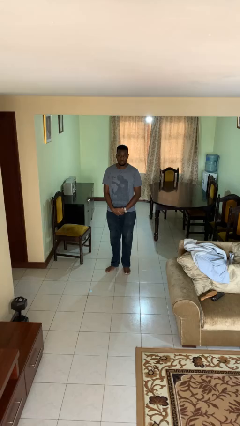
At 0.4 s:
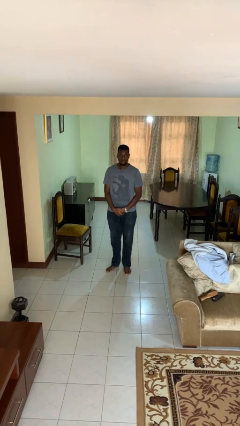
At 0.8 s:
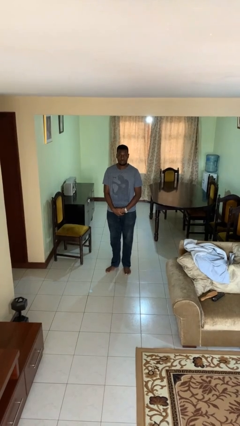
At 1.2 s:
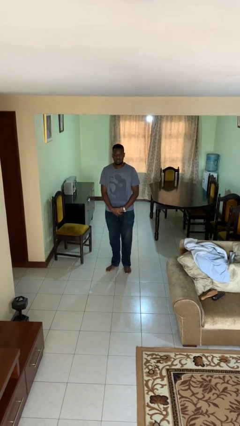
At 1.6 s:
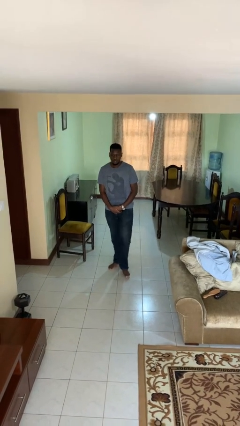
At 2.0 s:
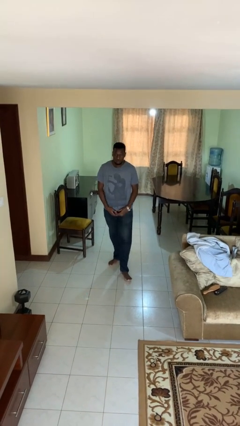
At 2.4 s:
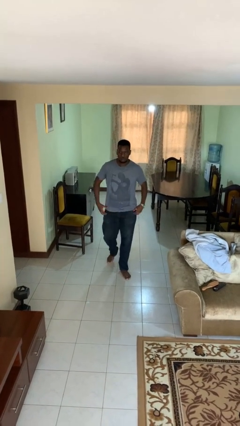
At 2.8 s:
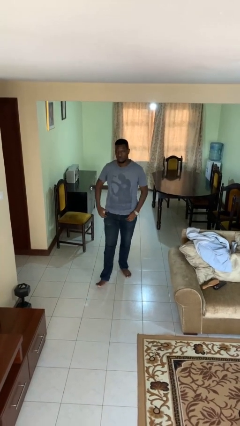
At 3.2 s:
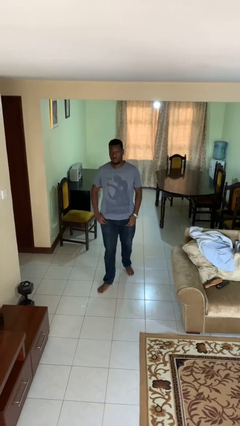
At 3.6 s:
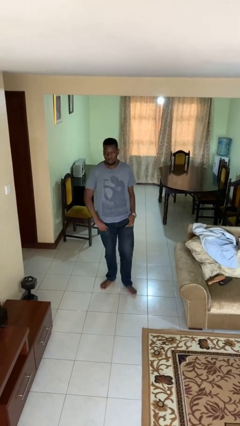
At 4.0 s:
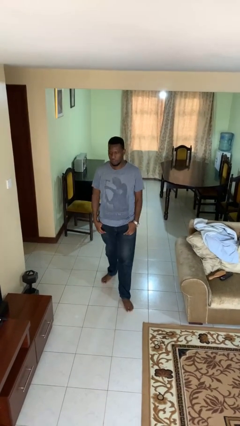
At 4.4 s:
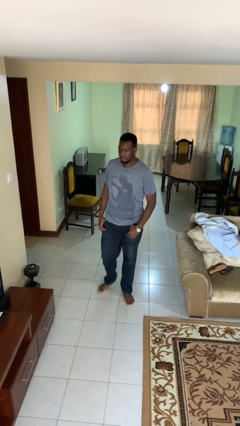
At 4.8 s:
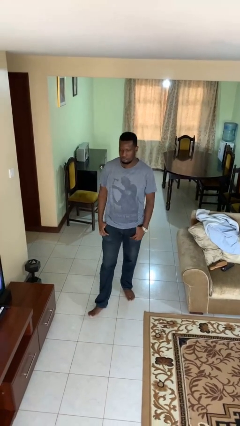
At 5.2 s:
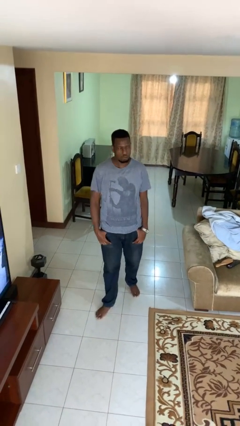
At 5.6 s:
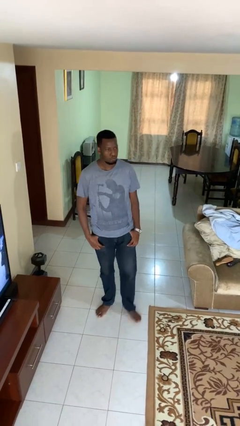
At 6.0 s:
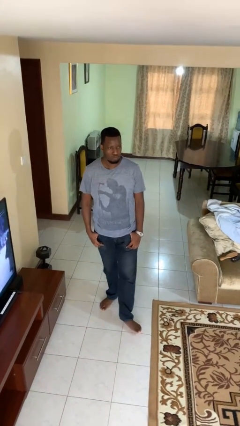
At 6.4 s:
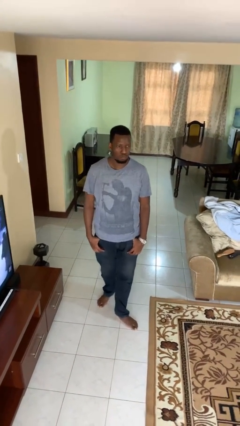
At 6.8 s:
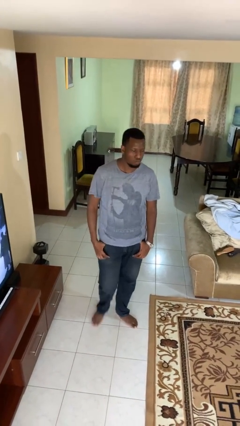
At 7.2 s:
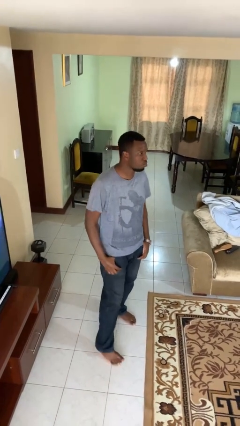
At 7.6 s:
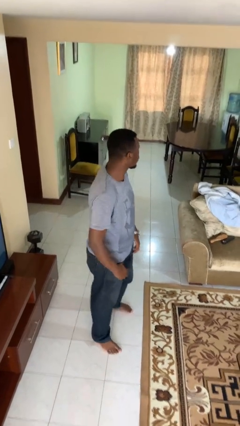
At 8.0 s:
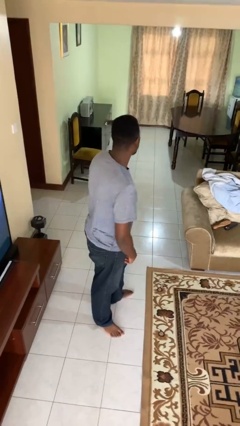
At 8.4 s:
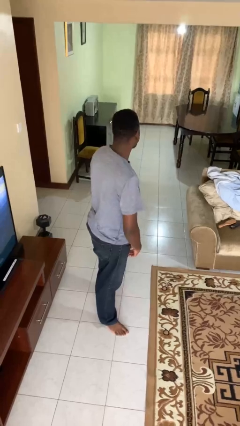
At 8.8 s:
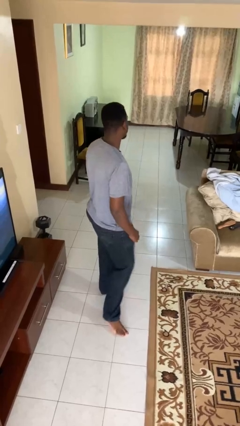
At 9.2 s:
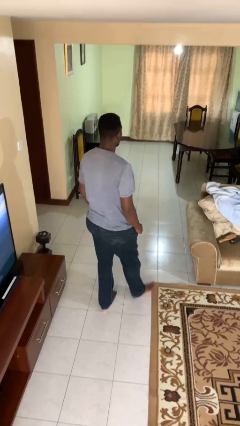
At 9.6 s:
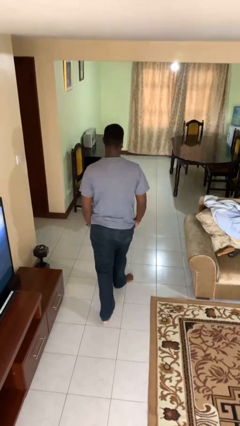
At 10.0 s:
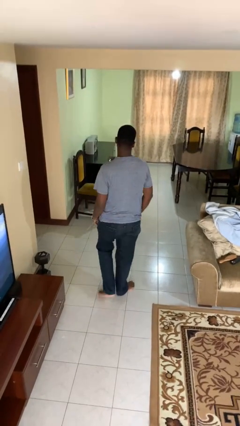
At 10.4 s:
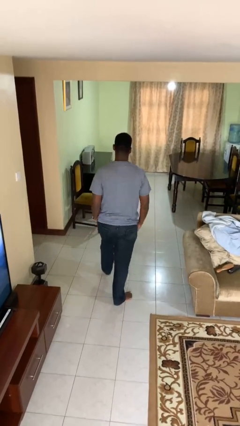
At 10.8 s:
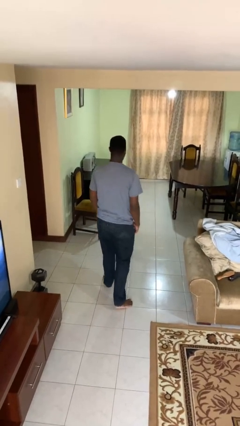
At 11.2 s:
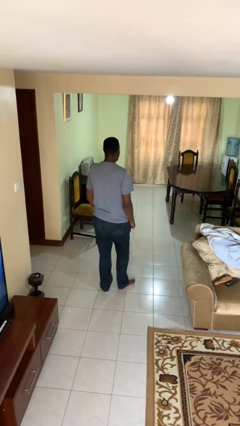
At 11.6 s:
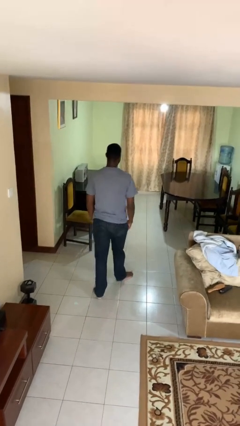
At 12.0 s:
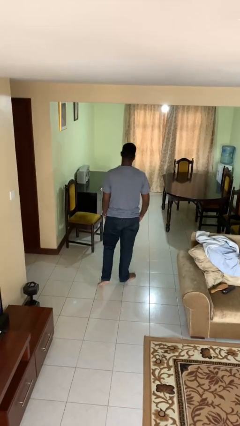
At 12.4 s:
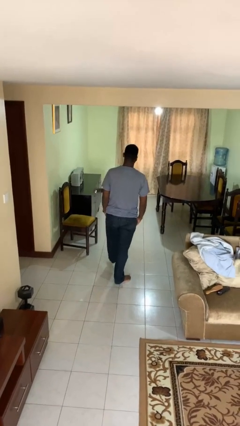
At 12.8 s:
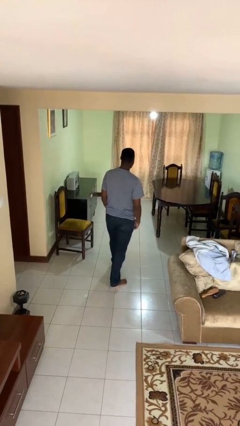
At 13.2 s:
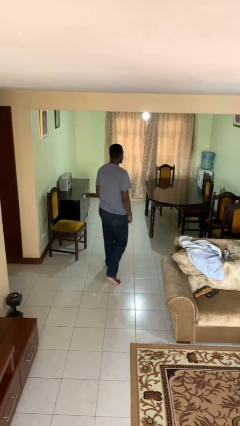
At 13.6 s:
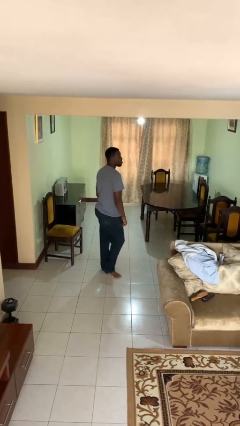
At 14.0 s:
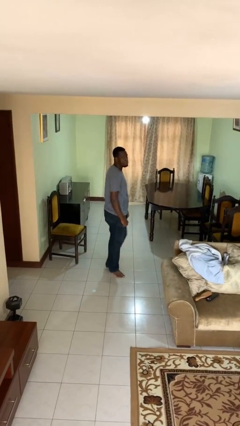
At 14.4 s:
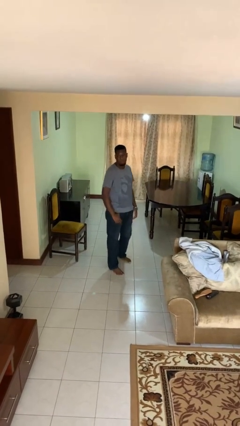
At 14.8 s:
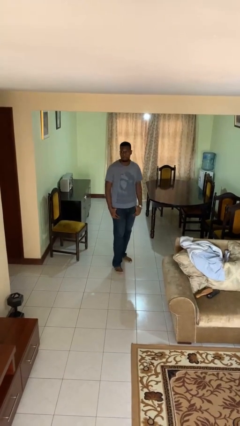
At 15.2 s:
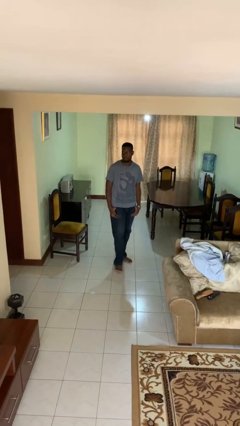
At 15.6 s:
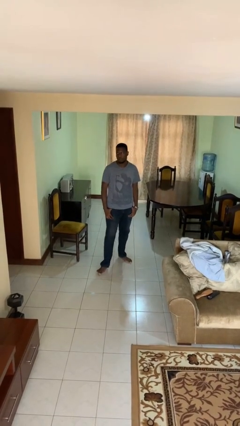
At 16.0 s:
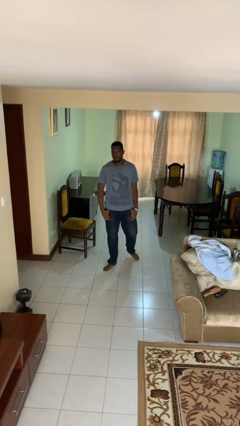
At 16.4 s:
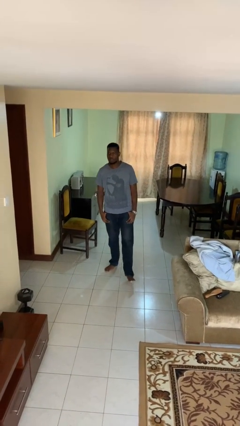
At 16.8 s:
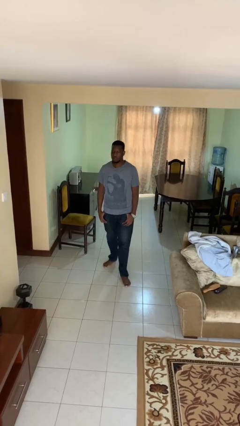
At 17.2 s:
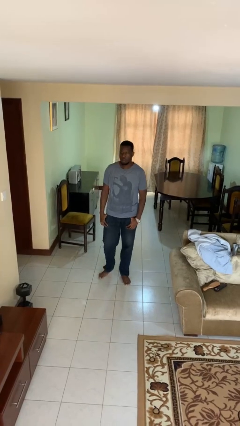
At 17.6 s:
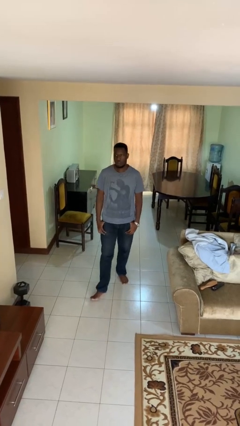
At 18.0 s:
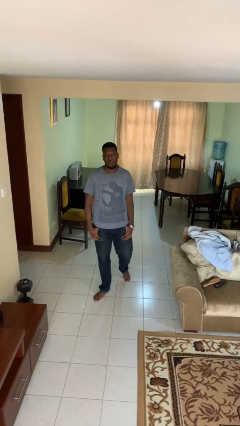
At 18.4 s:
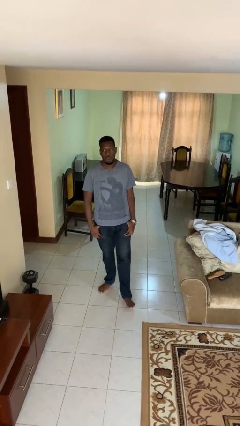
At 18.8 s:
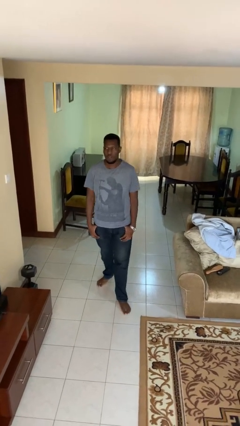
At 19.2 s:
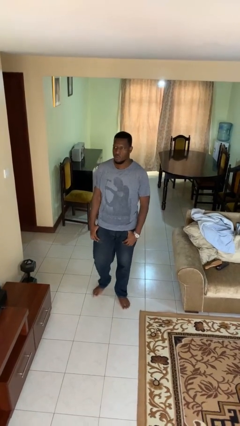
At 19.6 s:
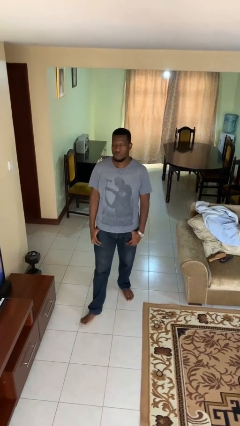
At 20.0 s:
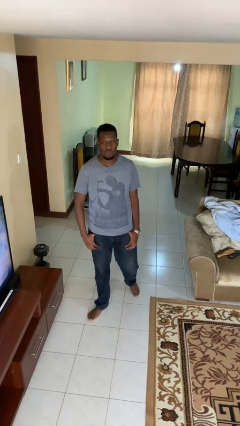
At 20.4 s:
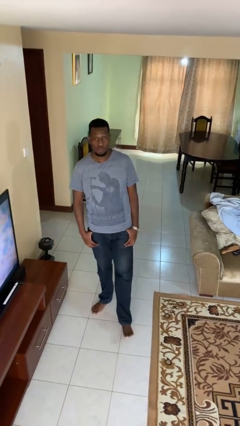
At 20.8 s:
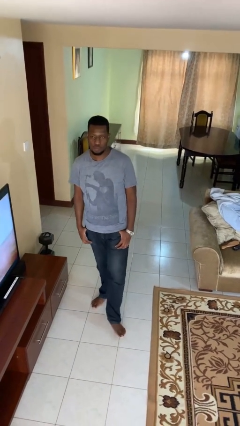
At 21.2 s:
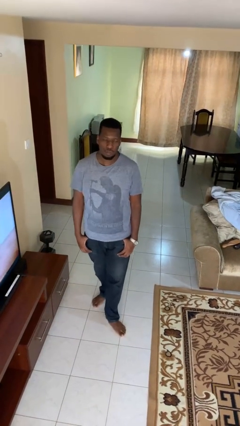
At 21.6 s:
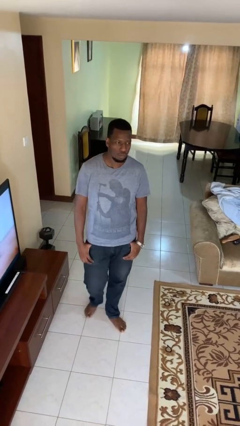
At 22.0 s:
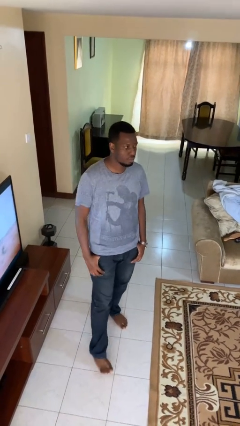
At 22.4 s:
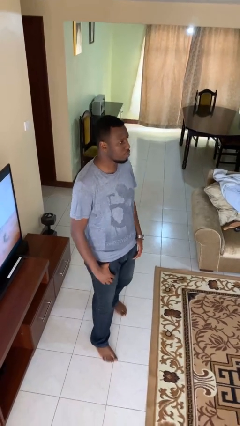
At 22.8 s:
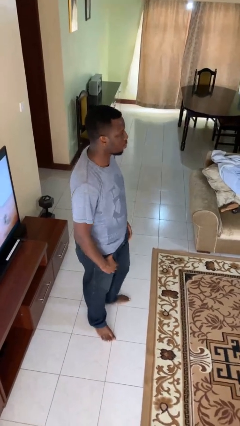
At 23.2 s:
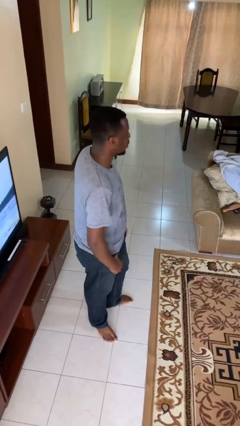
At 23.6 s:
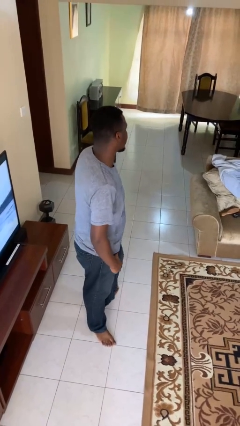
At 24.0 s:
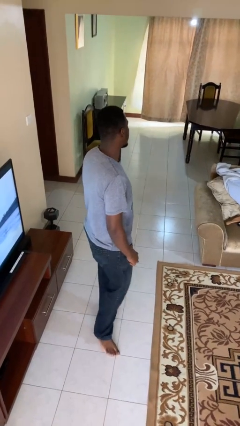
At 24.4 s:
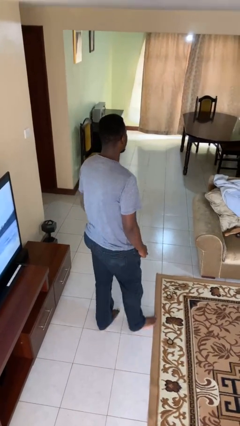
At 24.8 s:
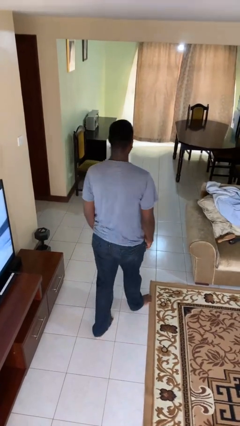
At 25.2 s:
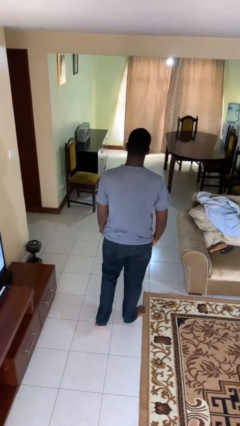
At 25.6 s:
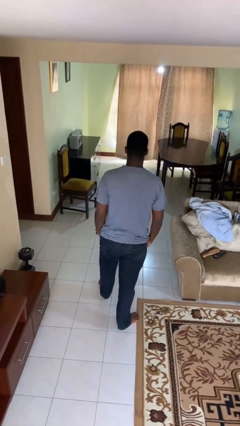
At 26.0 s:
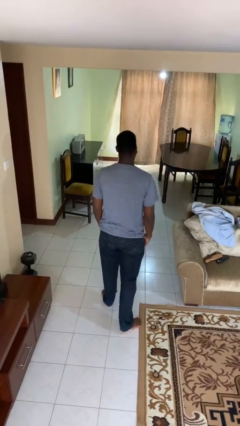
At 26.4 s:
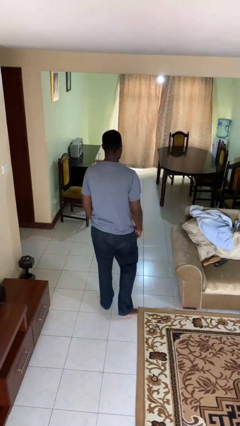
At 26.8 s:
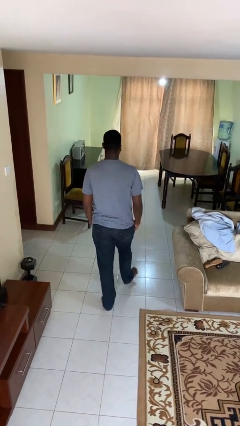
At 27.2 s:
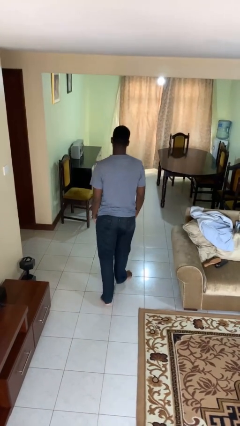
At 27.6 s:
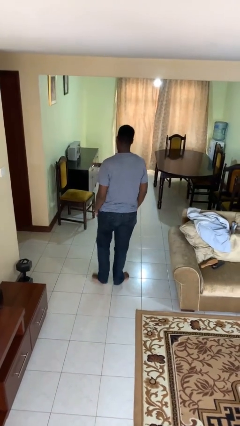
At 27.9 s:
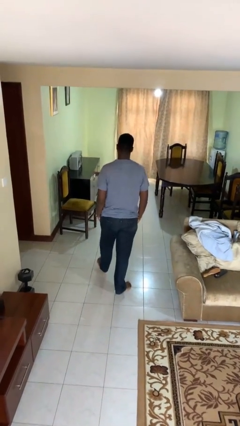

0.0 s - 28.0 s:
person walks

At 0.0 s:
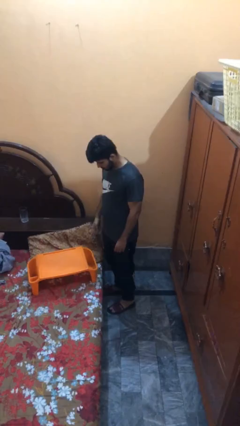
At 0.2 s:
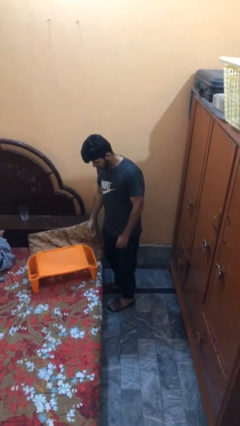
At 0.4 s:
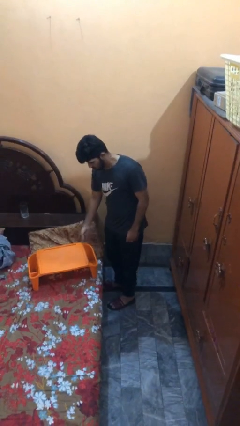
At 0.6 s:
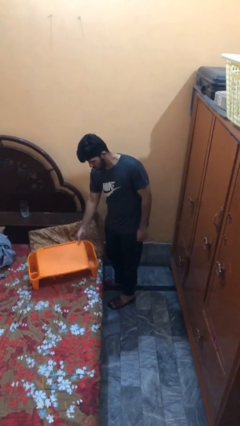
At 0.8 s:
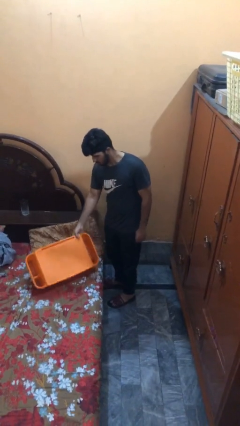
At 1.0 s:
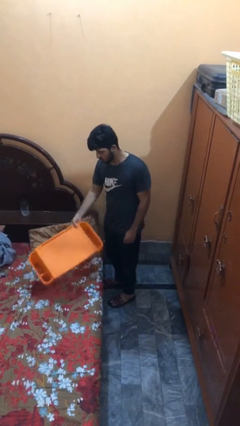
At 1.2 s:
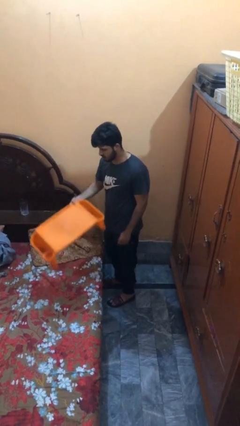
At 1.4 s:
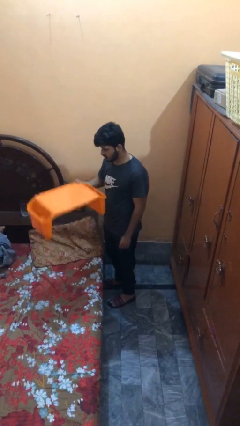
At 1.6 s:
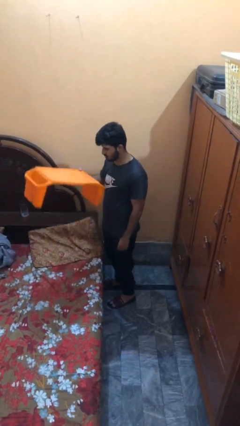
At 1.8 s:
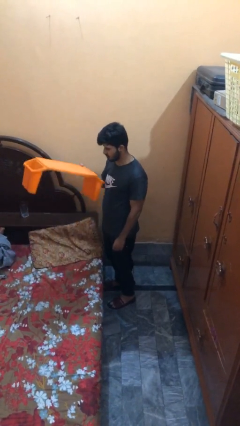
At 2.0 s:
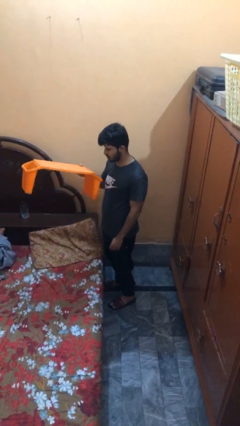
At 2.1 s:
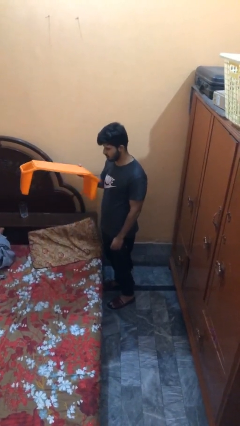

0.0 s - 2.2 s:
person picks up object from bed

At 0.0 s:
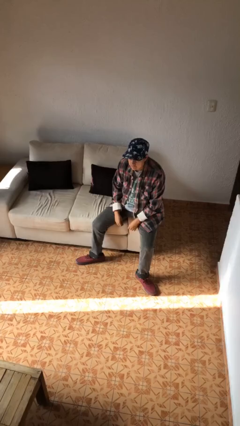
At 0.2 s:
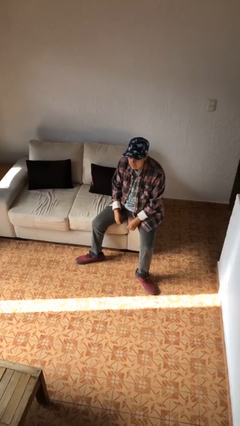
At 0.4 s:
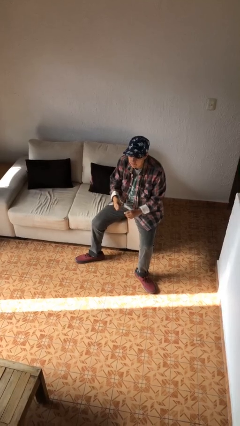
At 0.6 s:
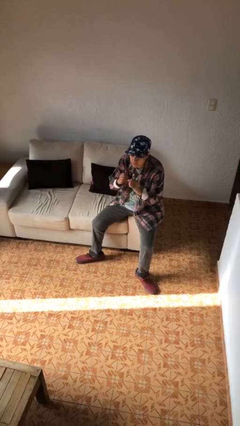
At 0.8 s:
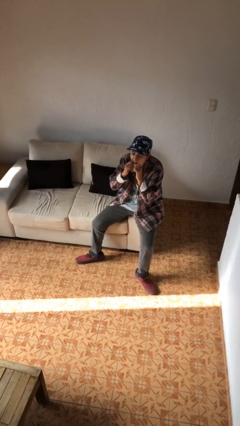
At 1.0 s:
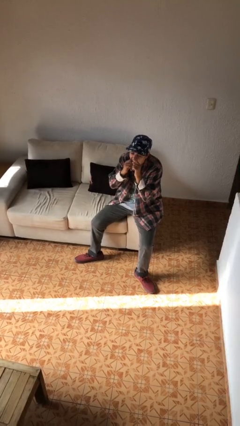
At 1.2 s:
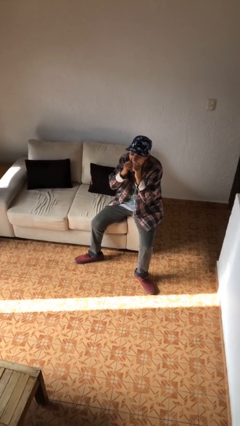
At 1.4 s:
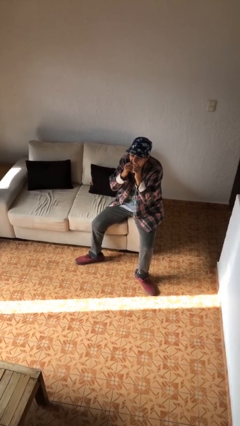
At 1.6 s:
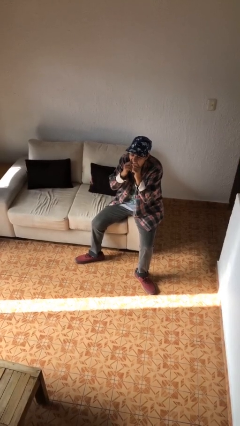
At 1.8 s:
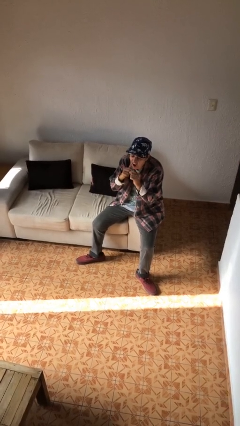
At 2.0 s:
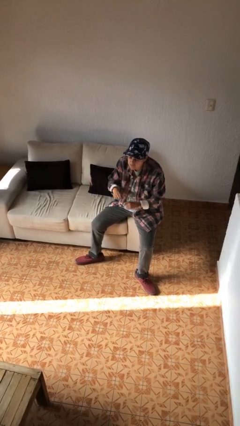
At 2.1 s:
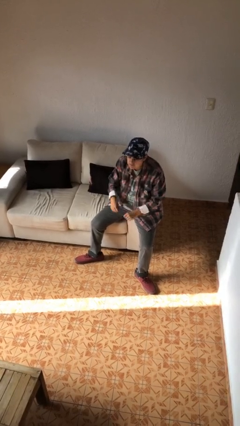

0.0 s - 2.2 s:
person flosses
